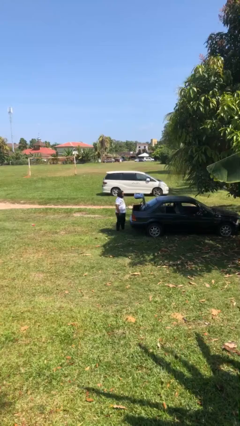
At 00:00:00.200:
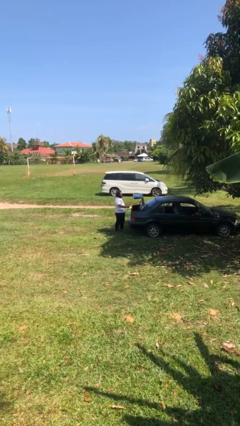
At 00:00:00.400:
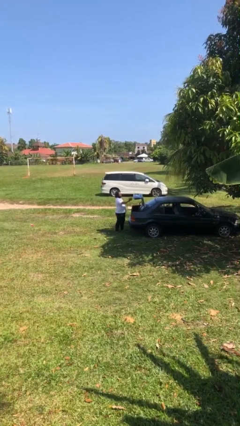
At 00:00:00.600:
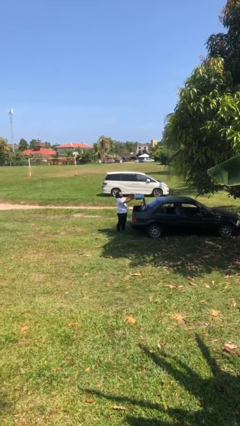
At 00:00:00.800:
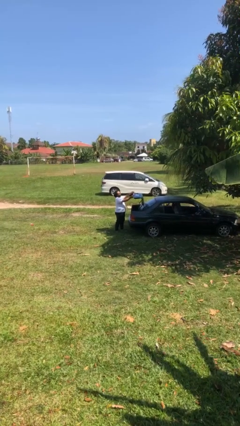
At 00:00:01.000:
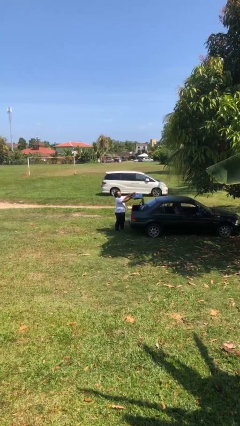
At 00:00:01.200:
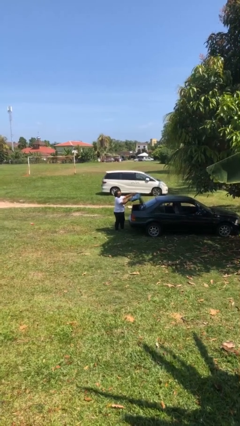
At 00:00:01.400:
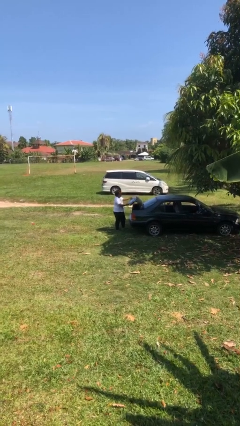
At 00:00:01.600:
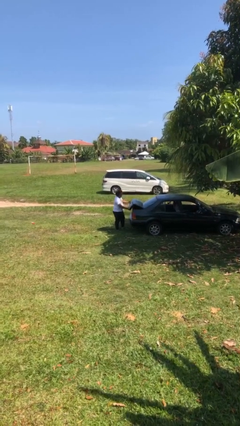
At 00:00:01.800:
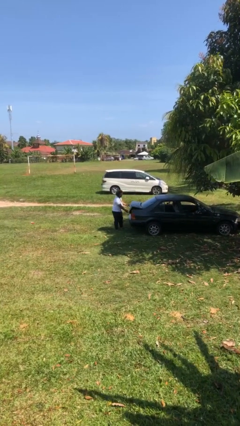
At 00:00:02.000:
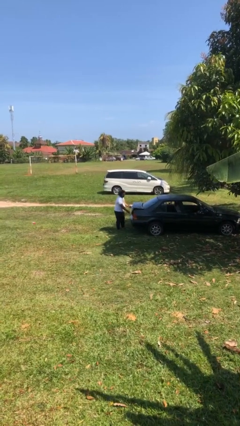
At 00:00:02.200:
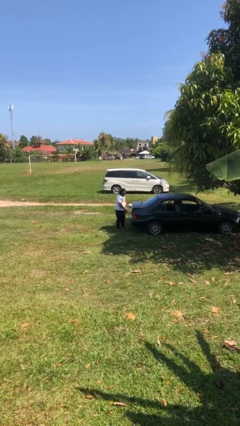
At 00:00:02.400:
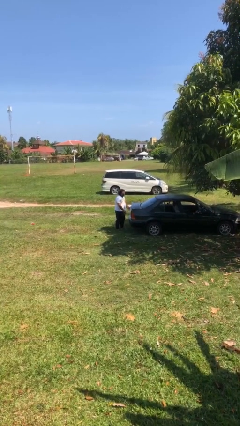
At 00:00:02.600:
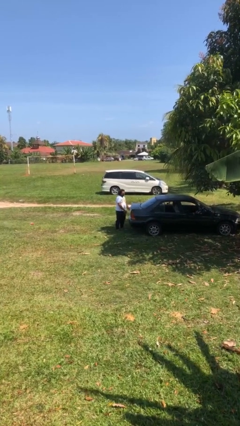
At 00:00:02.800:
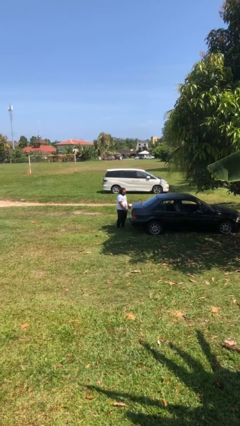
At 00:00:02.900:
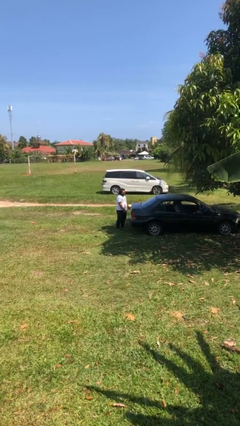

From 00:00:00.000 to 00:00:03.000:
person closes car trunk

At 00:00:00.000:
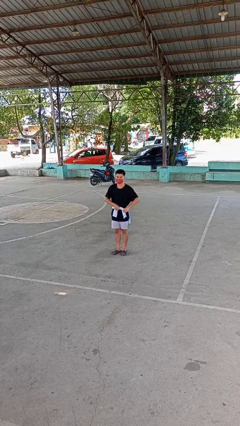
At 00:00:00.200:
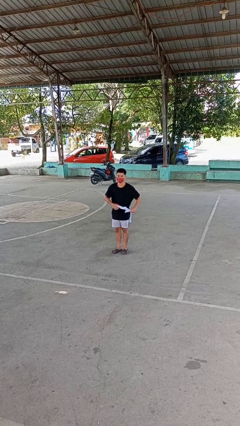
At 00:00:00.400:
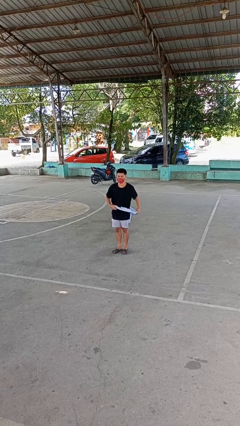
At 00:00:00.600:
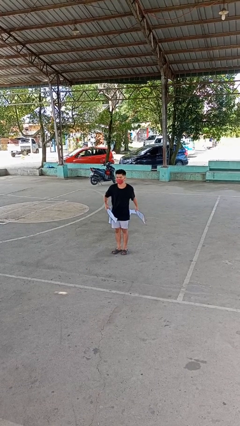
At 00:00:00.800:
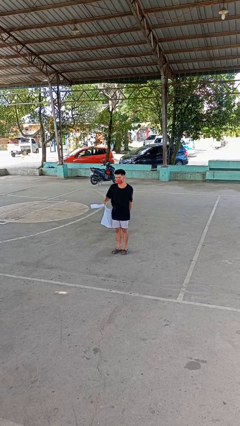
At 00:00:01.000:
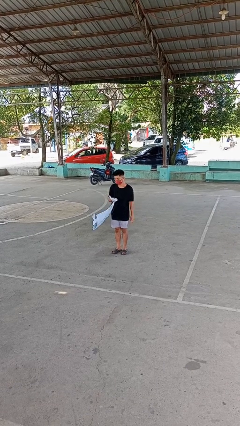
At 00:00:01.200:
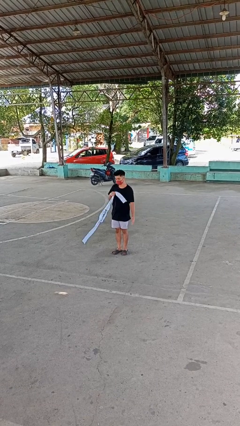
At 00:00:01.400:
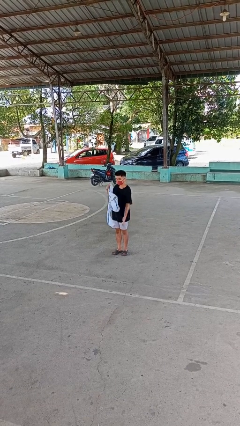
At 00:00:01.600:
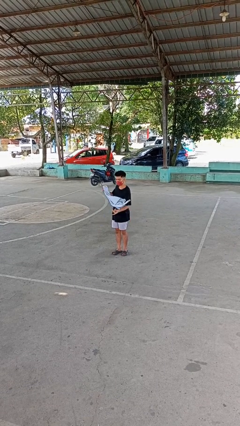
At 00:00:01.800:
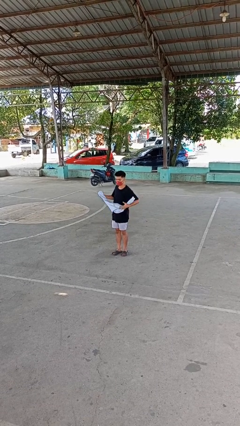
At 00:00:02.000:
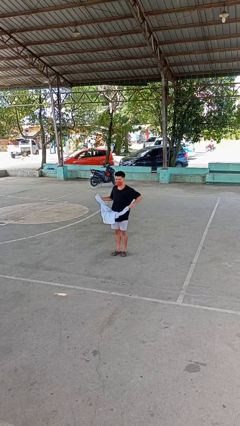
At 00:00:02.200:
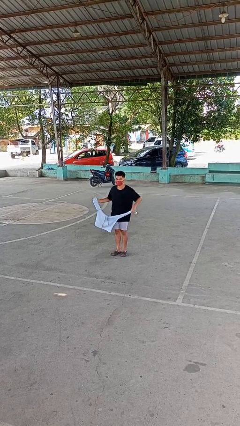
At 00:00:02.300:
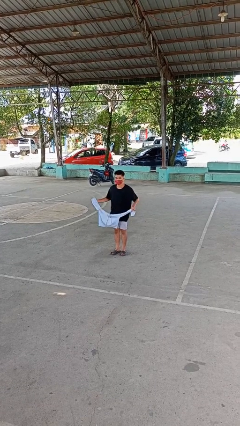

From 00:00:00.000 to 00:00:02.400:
person unties jacket around waist

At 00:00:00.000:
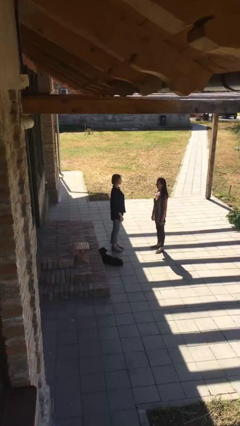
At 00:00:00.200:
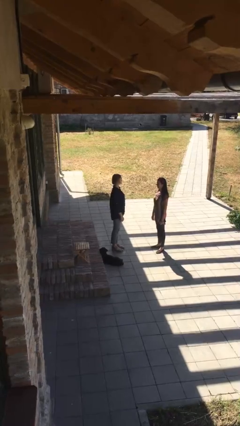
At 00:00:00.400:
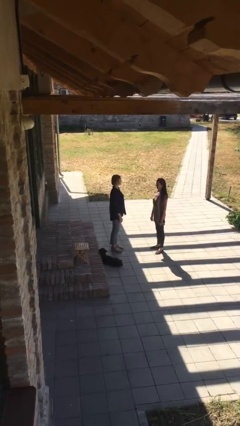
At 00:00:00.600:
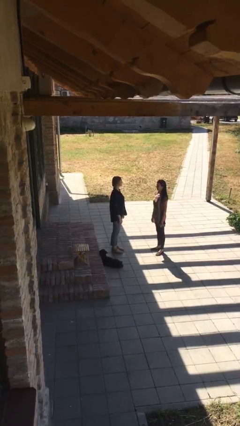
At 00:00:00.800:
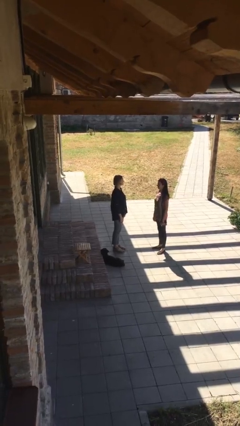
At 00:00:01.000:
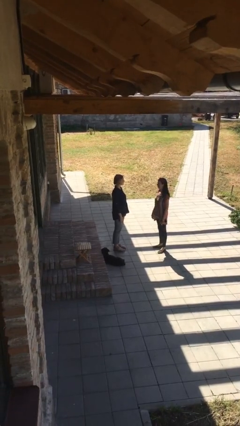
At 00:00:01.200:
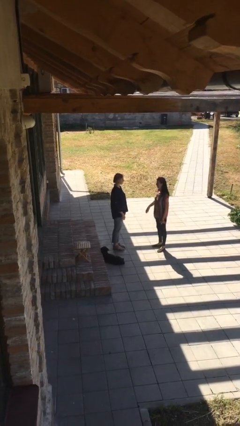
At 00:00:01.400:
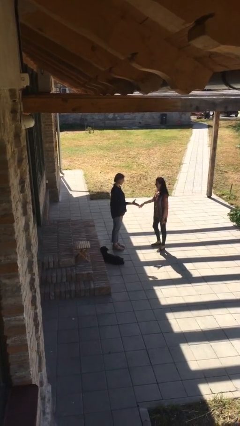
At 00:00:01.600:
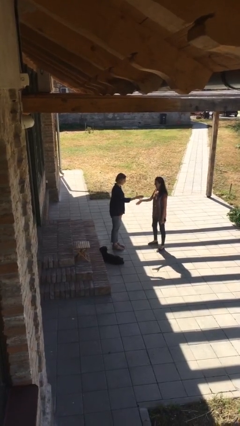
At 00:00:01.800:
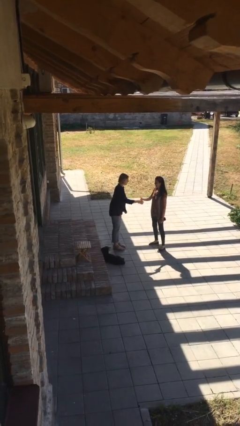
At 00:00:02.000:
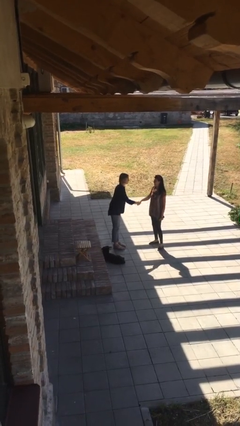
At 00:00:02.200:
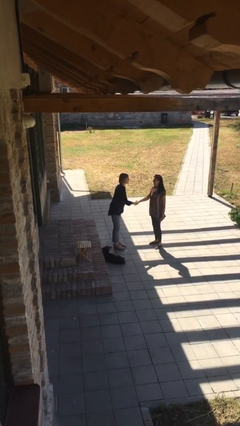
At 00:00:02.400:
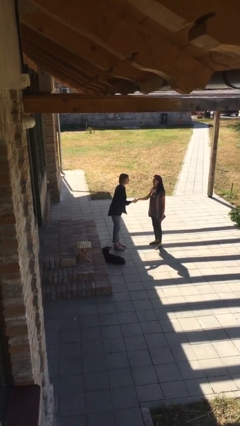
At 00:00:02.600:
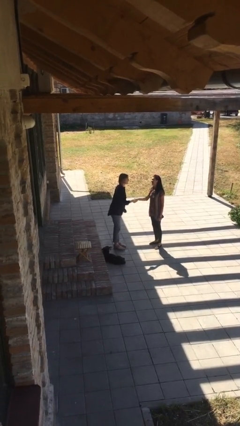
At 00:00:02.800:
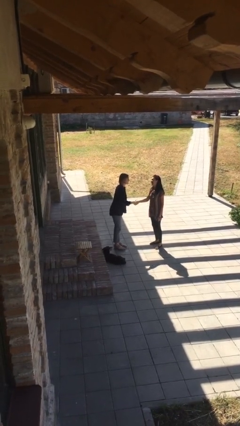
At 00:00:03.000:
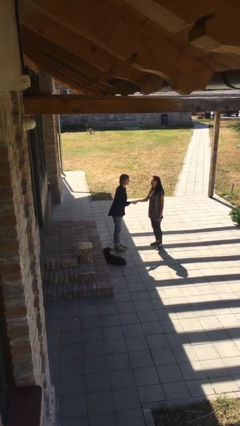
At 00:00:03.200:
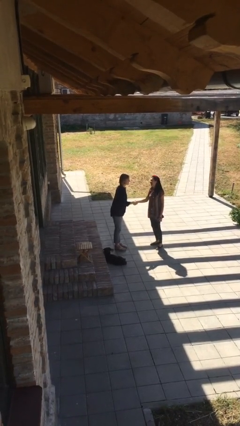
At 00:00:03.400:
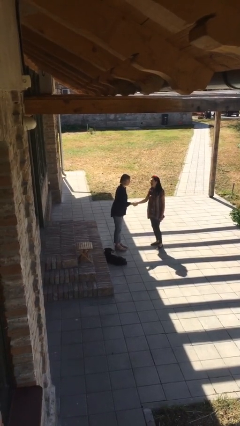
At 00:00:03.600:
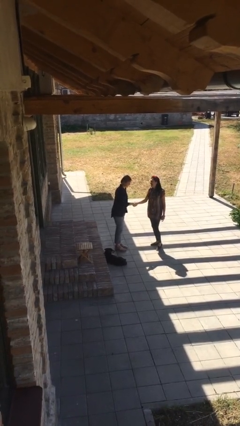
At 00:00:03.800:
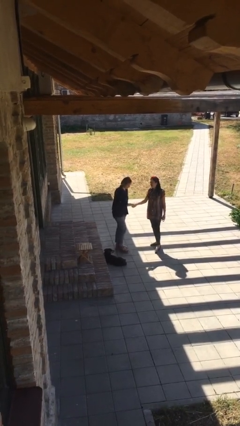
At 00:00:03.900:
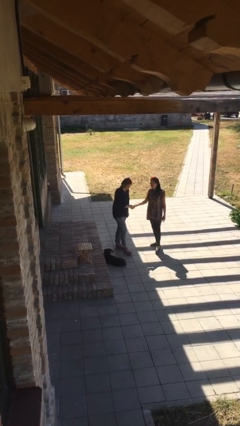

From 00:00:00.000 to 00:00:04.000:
person shakes hand

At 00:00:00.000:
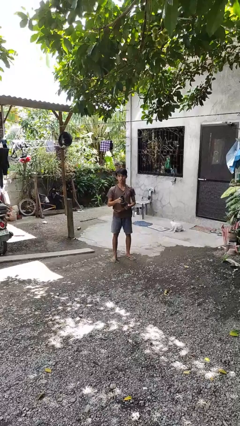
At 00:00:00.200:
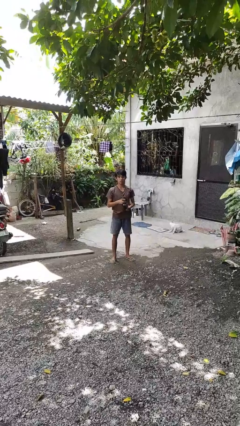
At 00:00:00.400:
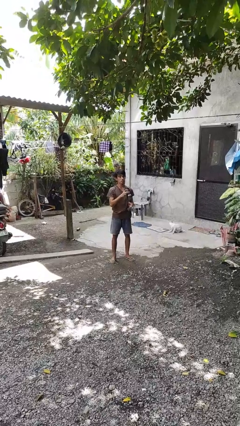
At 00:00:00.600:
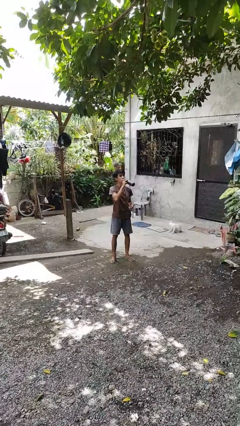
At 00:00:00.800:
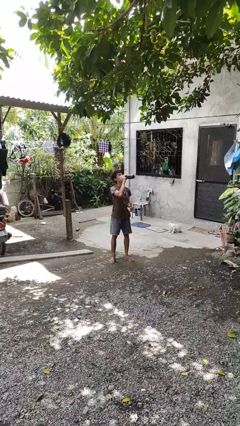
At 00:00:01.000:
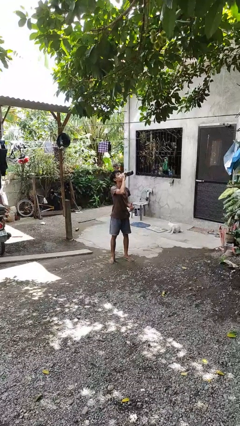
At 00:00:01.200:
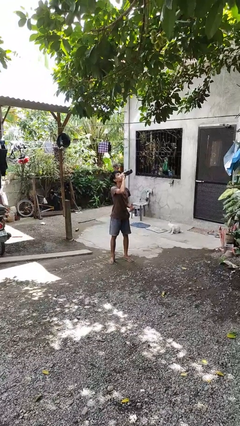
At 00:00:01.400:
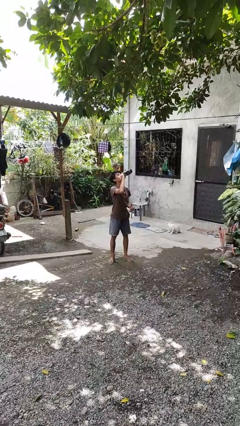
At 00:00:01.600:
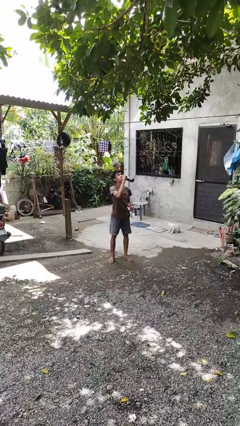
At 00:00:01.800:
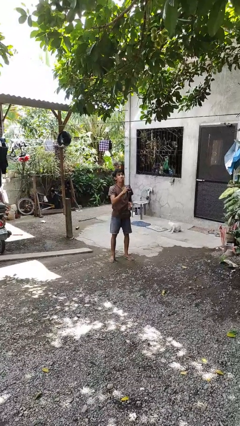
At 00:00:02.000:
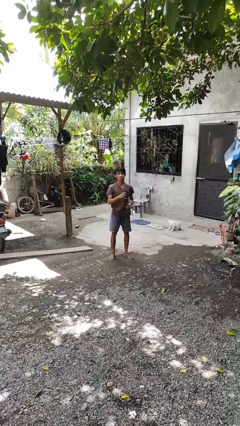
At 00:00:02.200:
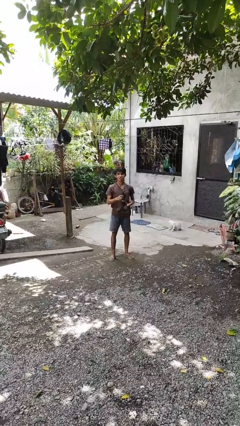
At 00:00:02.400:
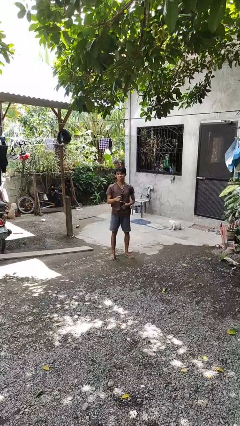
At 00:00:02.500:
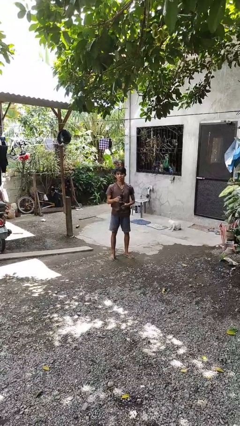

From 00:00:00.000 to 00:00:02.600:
person drinks from bottle

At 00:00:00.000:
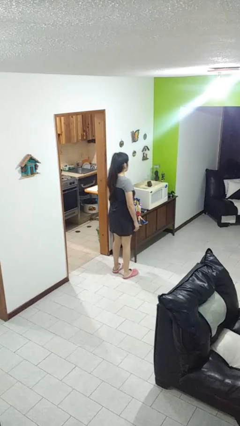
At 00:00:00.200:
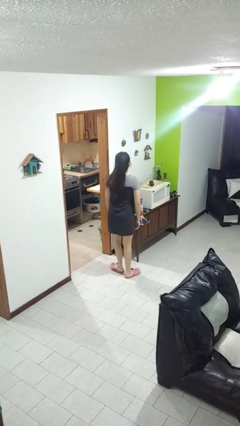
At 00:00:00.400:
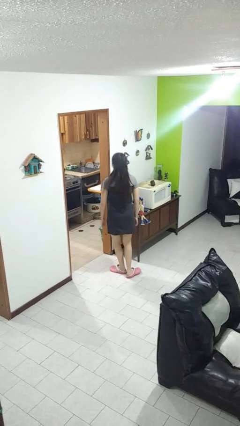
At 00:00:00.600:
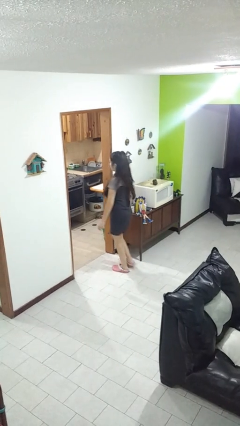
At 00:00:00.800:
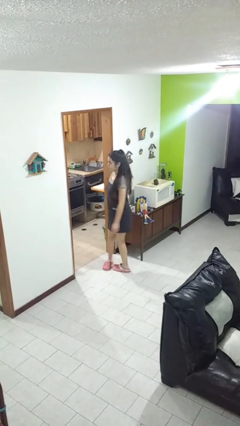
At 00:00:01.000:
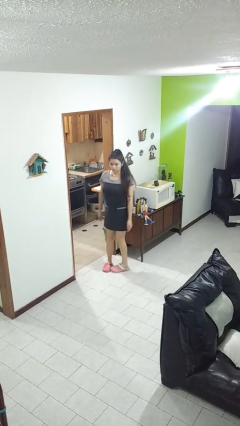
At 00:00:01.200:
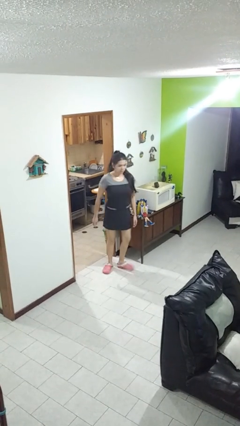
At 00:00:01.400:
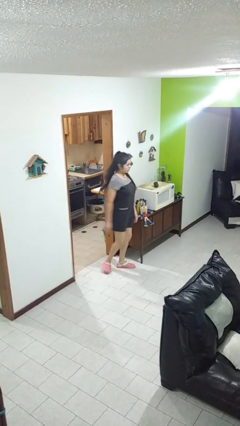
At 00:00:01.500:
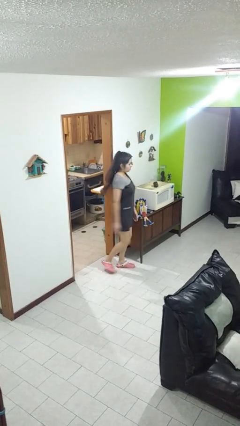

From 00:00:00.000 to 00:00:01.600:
person twirls

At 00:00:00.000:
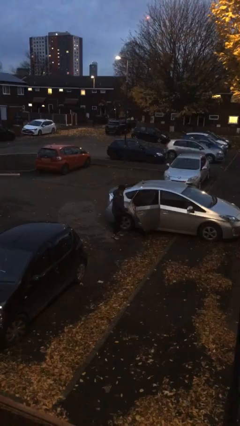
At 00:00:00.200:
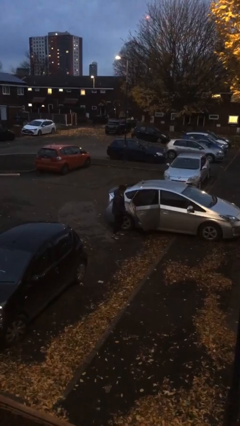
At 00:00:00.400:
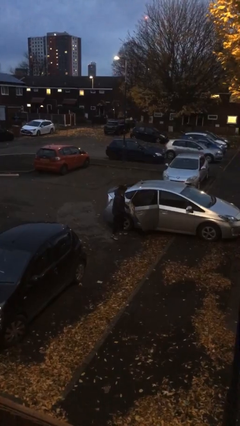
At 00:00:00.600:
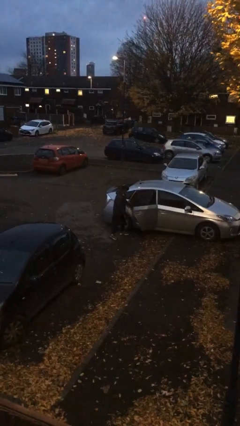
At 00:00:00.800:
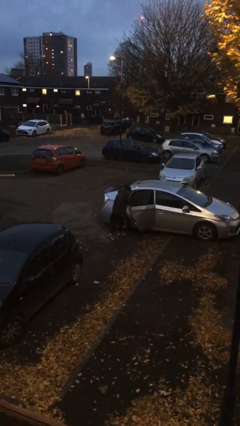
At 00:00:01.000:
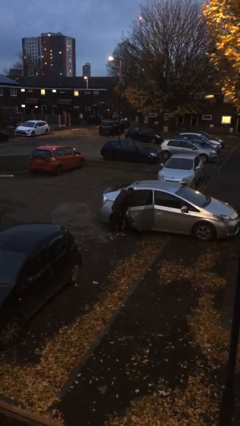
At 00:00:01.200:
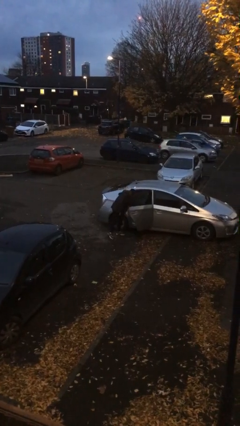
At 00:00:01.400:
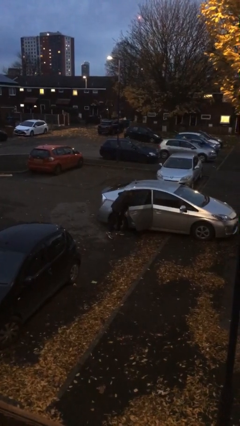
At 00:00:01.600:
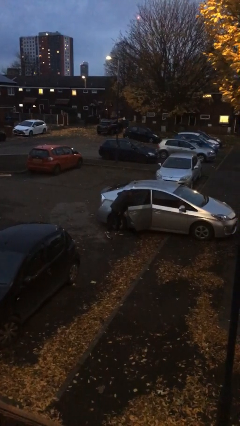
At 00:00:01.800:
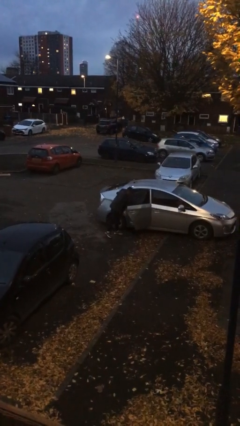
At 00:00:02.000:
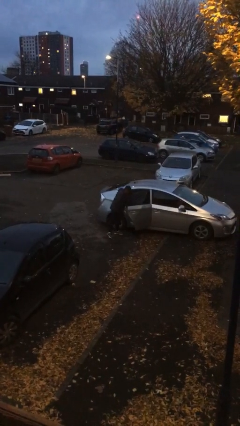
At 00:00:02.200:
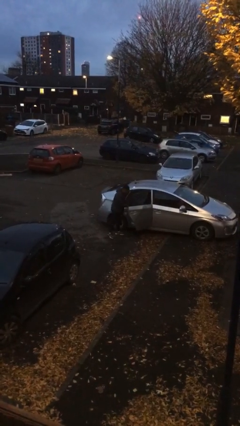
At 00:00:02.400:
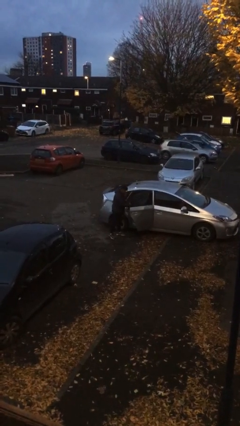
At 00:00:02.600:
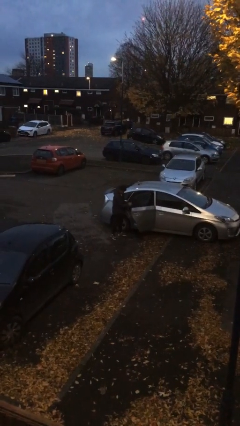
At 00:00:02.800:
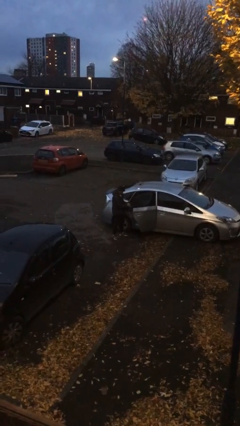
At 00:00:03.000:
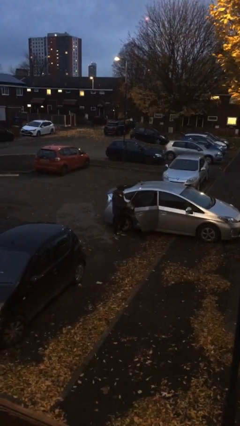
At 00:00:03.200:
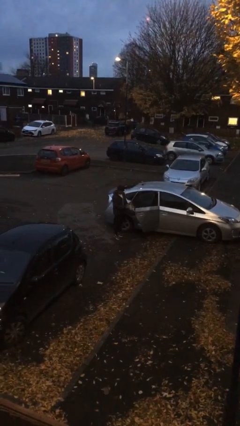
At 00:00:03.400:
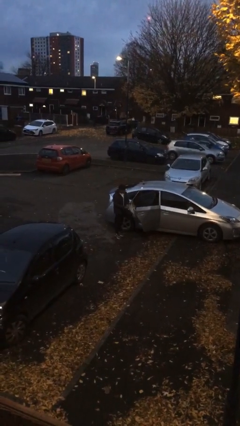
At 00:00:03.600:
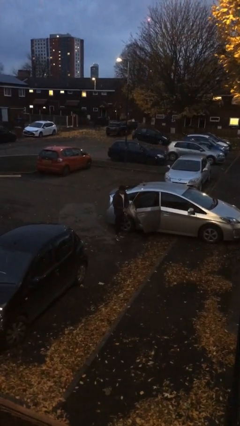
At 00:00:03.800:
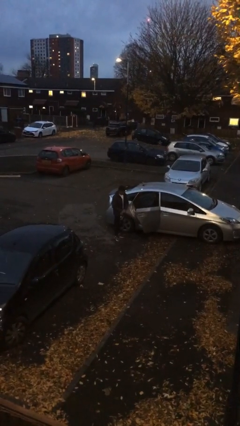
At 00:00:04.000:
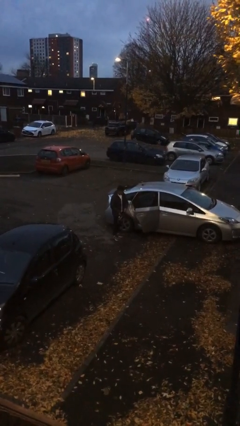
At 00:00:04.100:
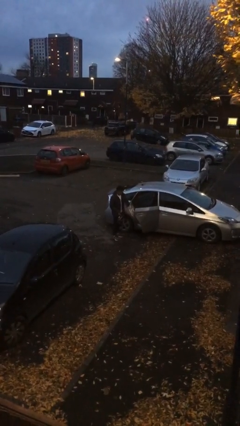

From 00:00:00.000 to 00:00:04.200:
person unloads car
